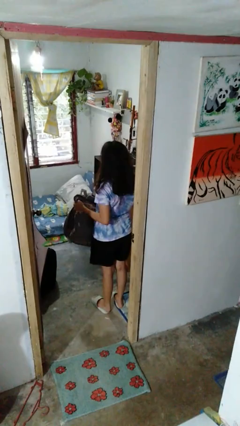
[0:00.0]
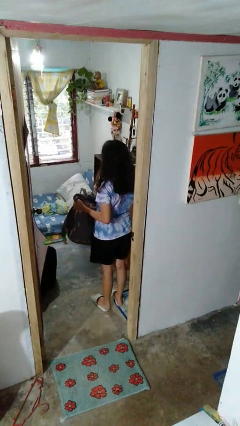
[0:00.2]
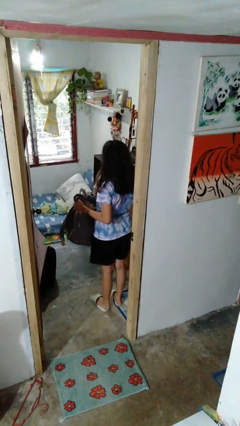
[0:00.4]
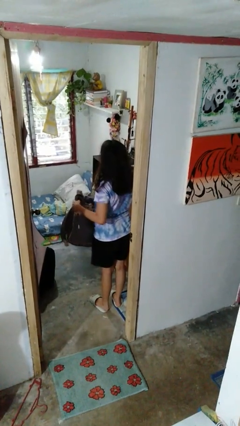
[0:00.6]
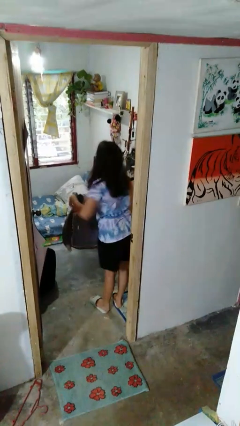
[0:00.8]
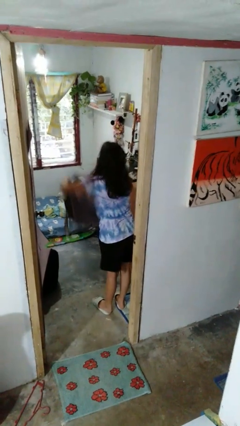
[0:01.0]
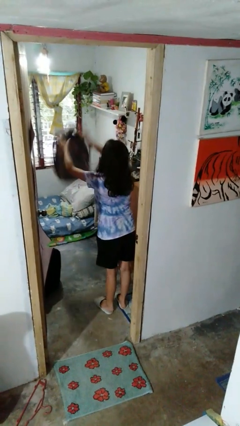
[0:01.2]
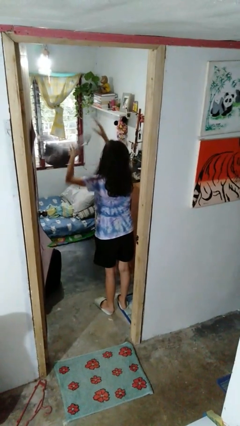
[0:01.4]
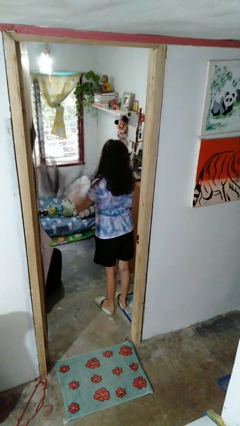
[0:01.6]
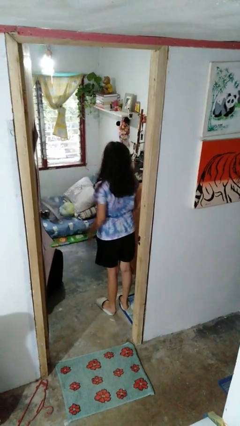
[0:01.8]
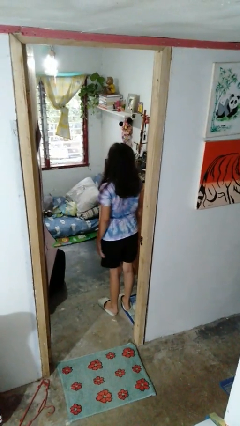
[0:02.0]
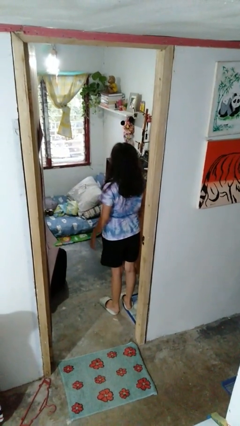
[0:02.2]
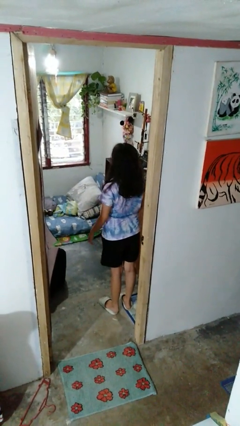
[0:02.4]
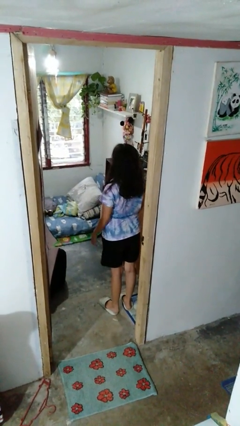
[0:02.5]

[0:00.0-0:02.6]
person throws object on bed

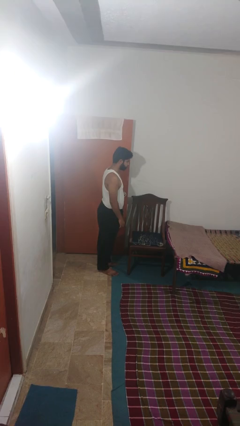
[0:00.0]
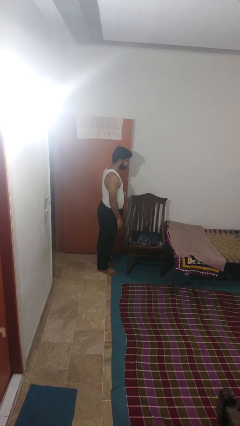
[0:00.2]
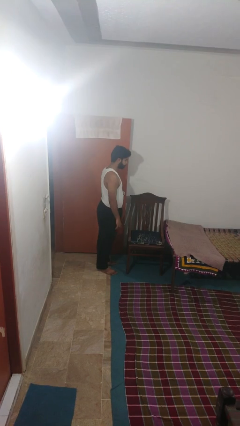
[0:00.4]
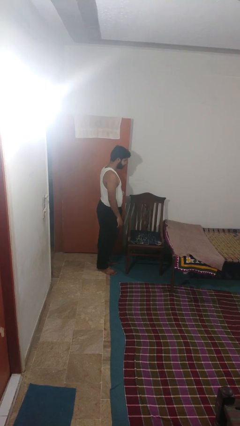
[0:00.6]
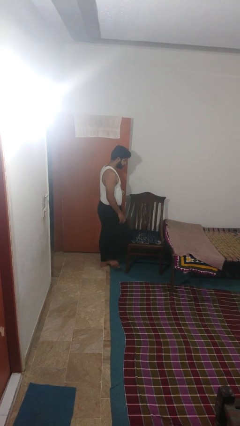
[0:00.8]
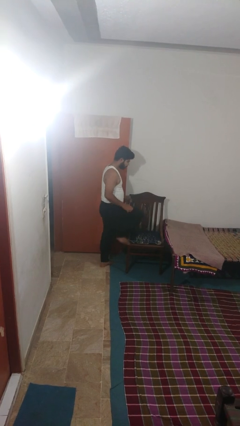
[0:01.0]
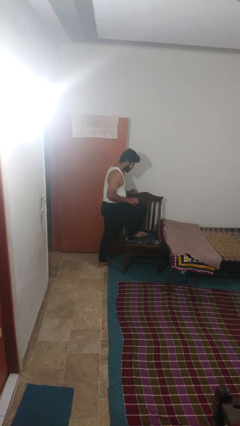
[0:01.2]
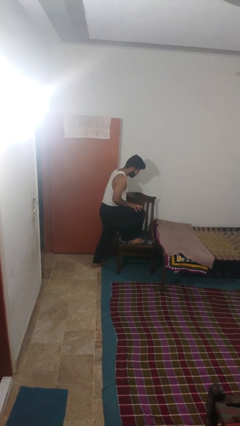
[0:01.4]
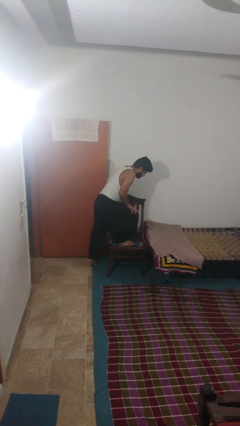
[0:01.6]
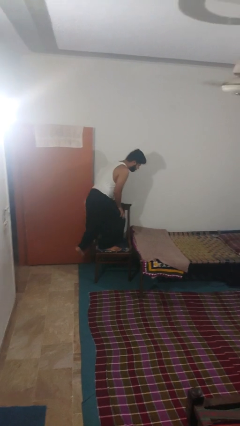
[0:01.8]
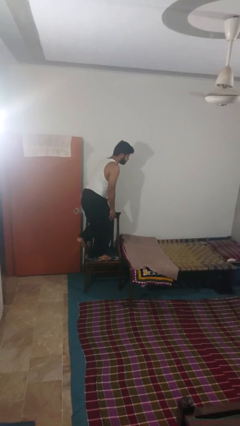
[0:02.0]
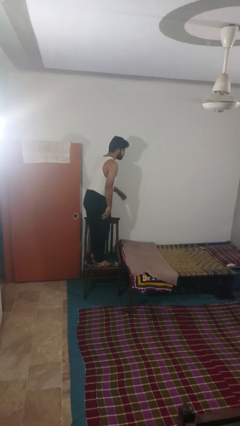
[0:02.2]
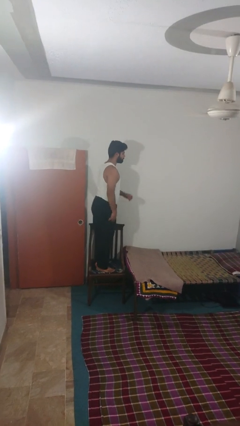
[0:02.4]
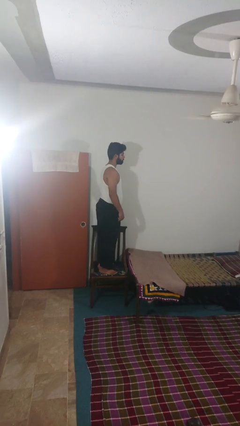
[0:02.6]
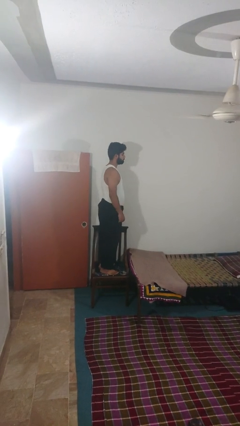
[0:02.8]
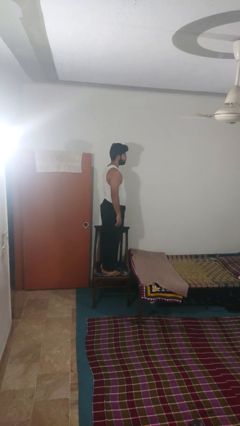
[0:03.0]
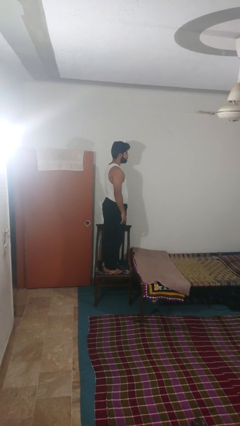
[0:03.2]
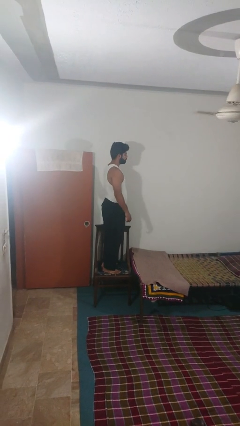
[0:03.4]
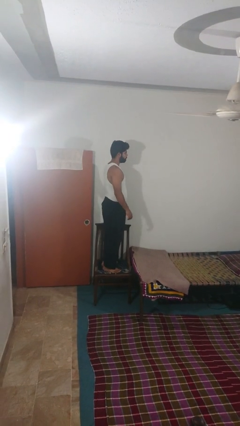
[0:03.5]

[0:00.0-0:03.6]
person climbs on chair

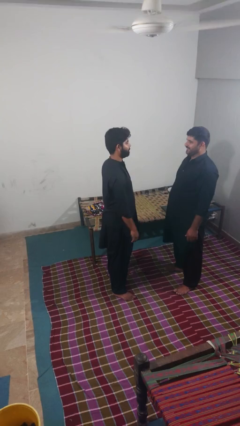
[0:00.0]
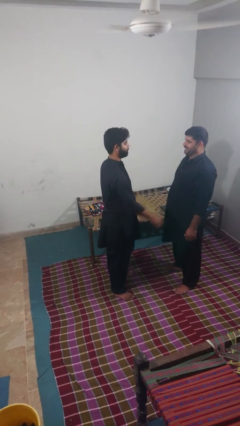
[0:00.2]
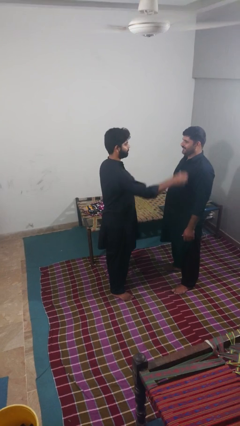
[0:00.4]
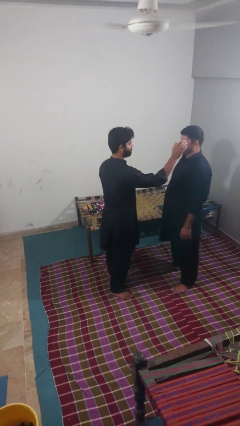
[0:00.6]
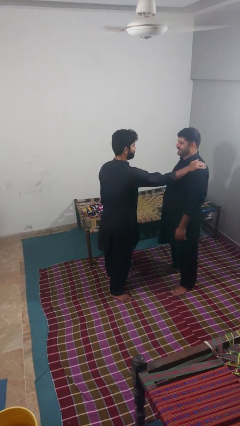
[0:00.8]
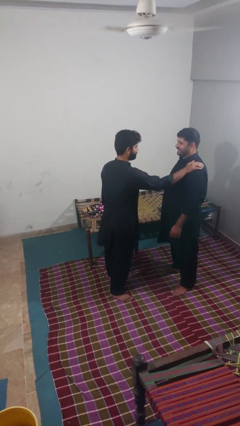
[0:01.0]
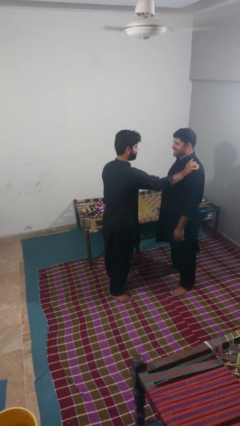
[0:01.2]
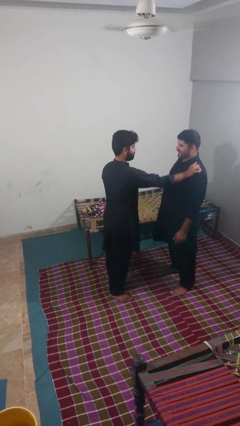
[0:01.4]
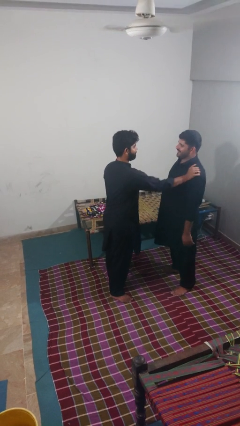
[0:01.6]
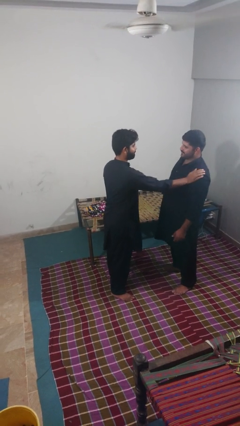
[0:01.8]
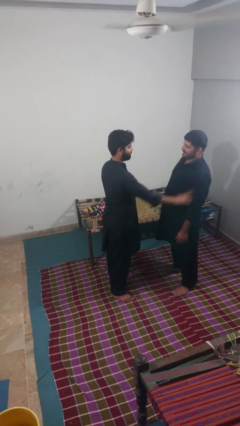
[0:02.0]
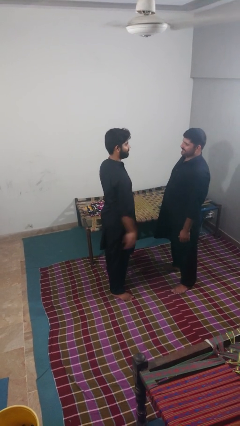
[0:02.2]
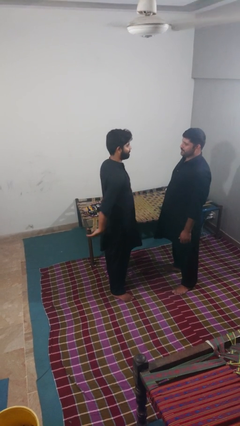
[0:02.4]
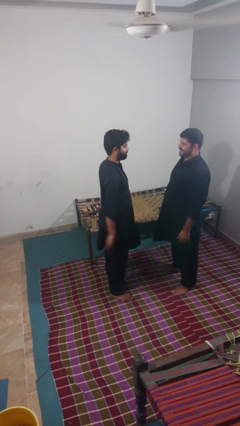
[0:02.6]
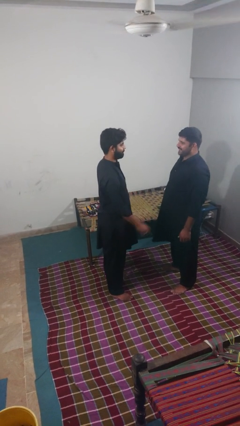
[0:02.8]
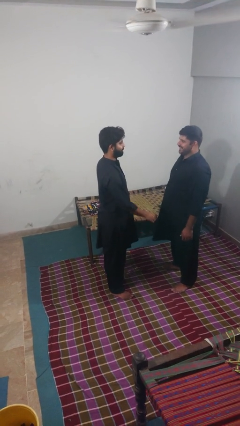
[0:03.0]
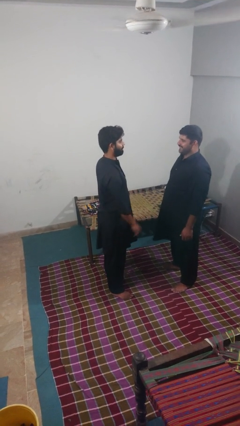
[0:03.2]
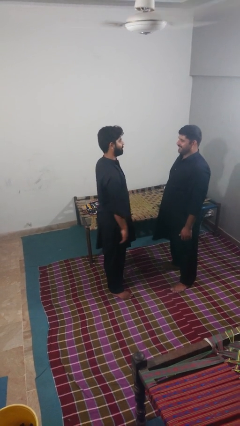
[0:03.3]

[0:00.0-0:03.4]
person pounds shoulders of person

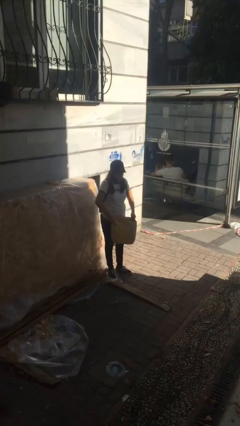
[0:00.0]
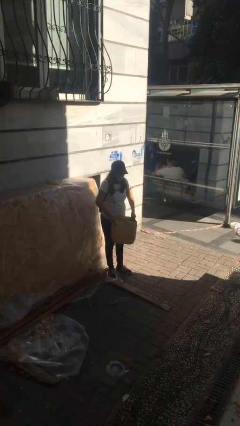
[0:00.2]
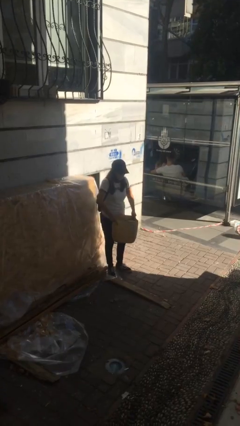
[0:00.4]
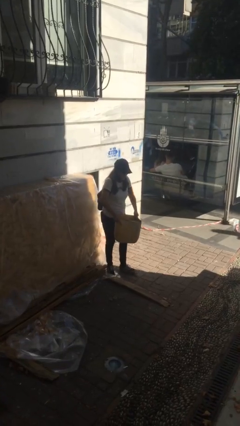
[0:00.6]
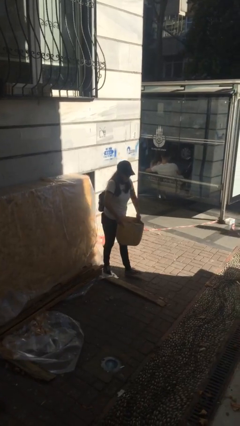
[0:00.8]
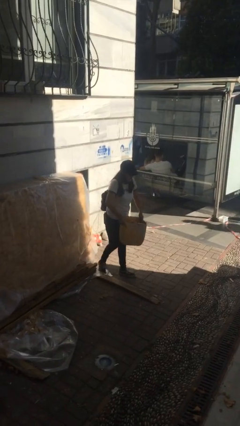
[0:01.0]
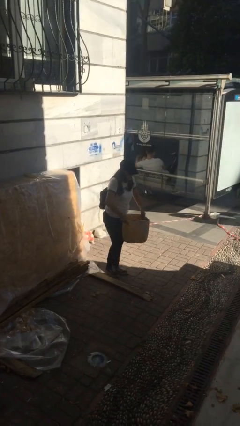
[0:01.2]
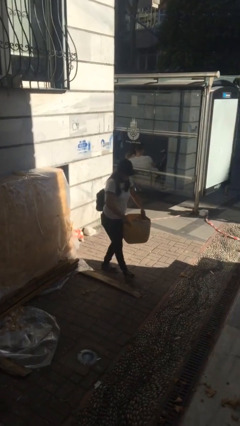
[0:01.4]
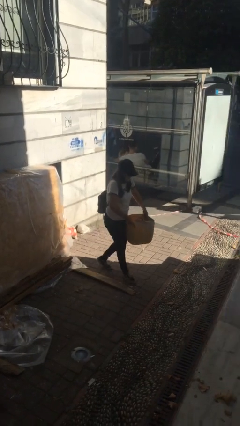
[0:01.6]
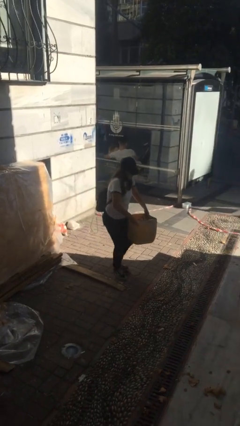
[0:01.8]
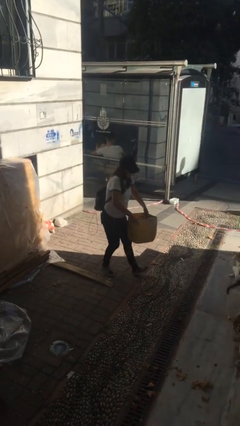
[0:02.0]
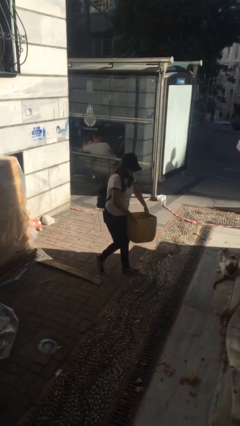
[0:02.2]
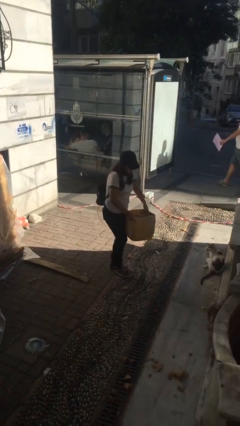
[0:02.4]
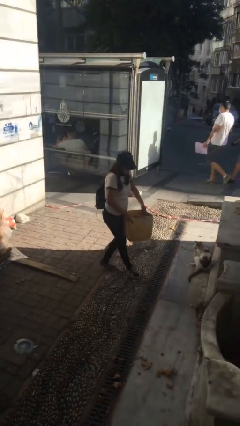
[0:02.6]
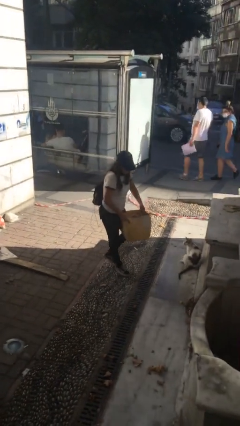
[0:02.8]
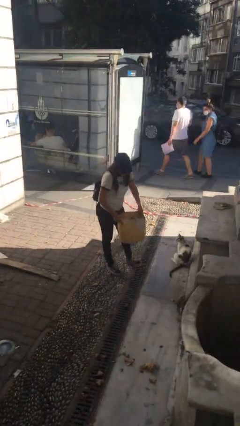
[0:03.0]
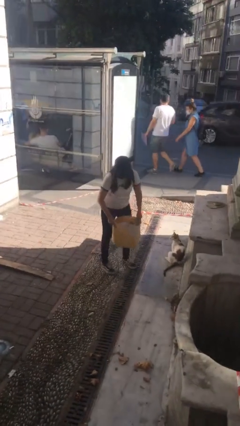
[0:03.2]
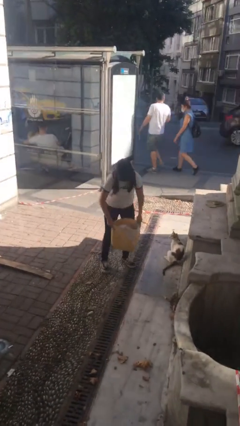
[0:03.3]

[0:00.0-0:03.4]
person carries heavy object

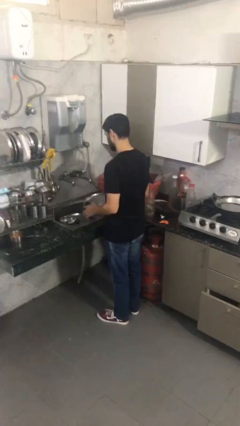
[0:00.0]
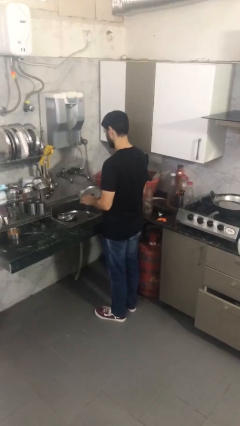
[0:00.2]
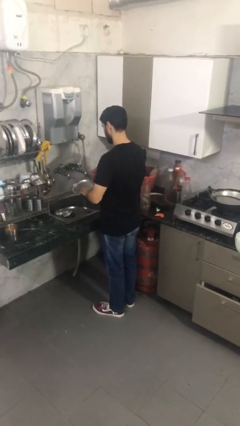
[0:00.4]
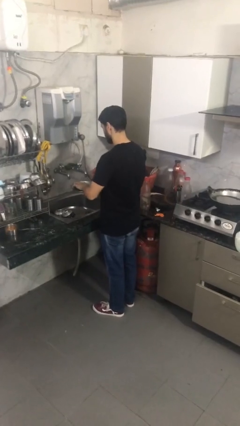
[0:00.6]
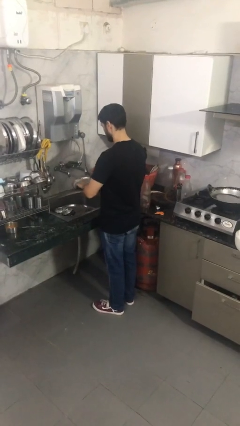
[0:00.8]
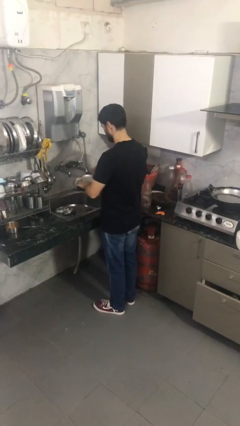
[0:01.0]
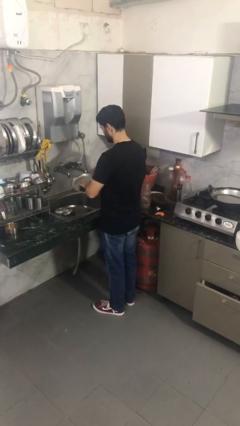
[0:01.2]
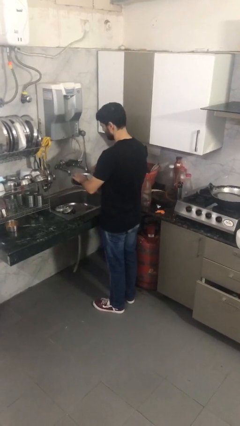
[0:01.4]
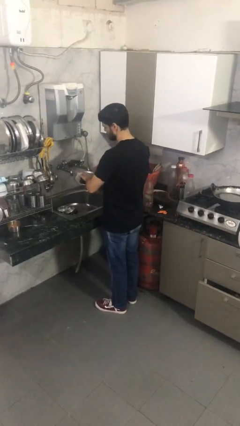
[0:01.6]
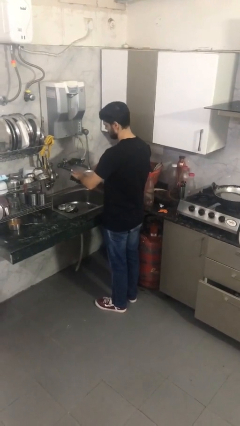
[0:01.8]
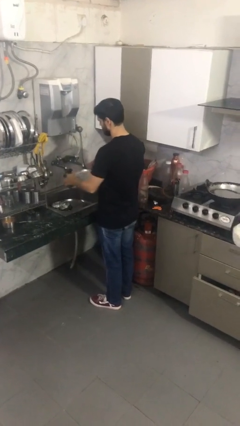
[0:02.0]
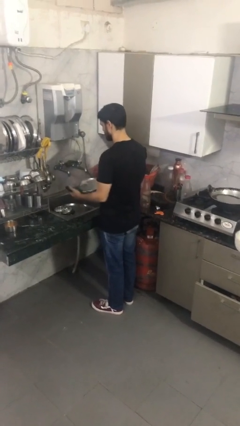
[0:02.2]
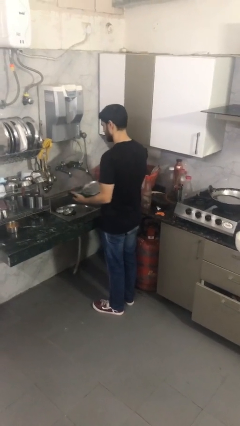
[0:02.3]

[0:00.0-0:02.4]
person washes dish

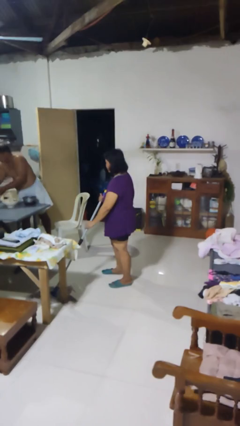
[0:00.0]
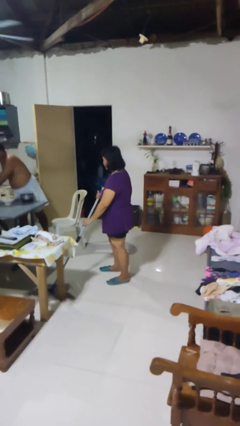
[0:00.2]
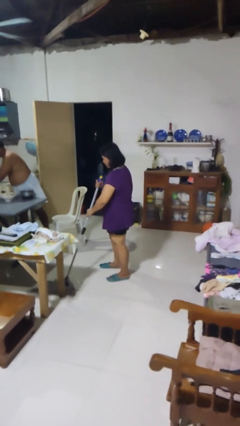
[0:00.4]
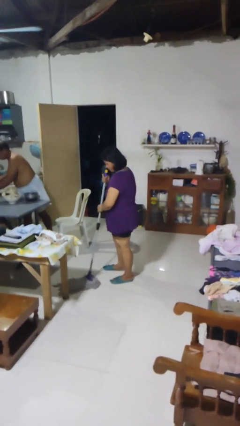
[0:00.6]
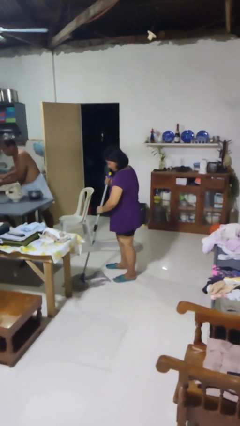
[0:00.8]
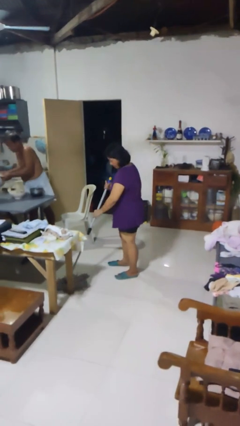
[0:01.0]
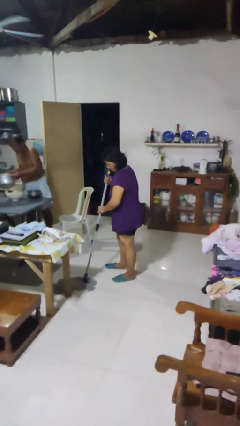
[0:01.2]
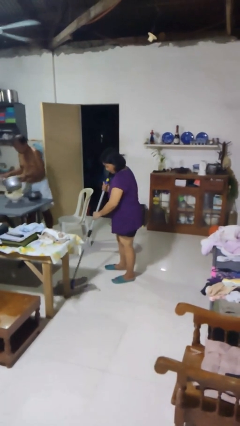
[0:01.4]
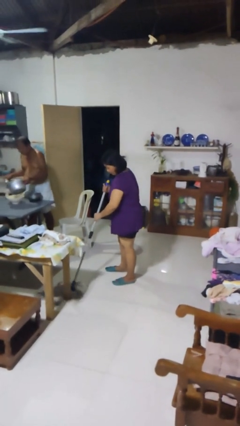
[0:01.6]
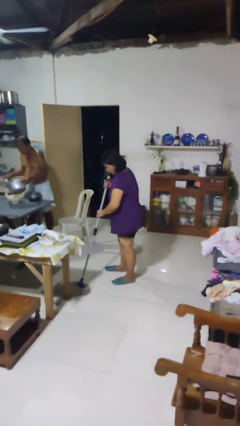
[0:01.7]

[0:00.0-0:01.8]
person mops
